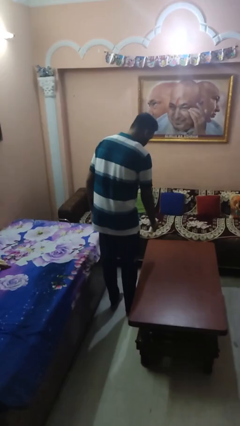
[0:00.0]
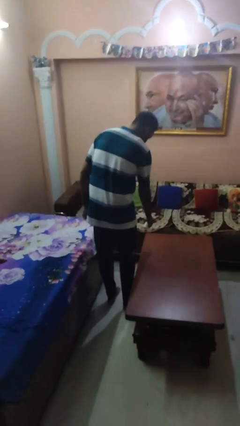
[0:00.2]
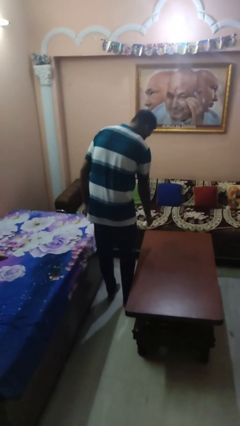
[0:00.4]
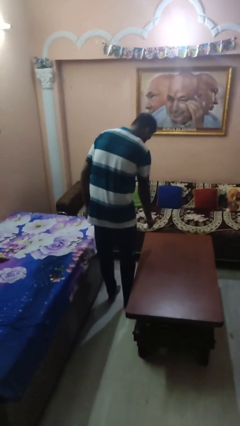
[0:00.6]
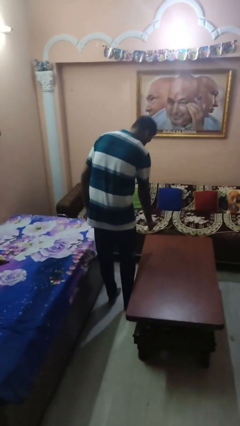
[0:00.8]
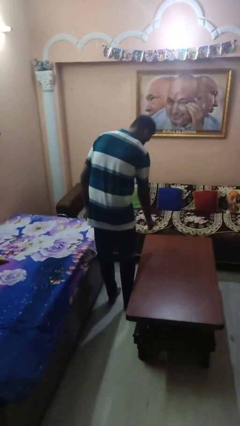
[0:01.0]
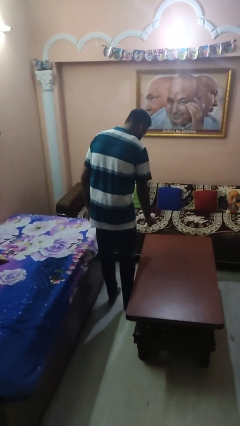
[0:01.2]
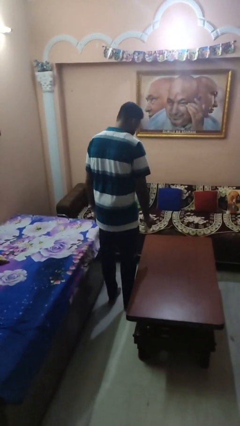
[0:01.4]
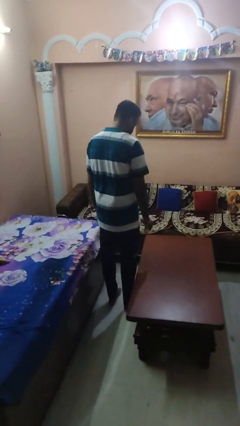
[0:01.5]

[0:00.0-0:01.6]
person sprays from bottle

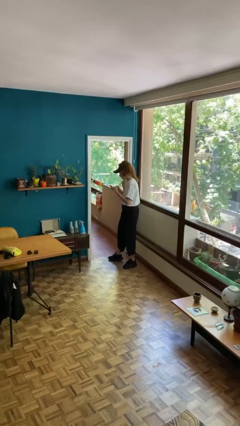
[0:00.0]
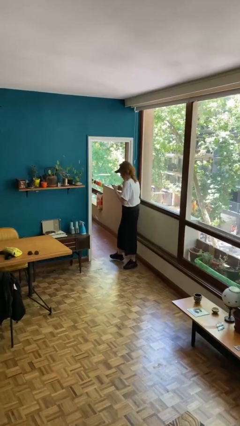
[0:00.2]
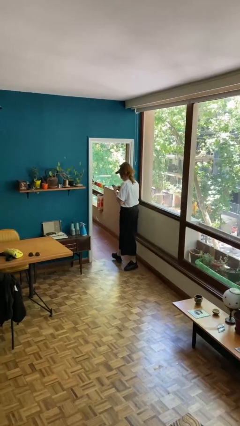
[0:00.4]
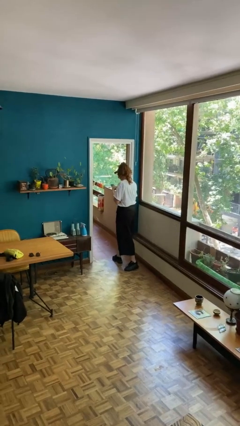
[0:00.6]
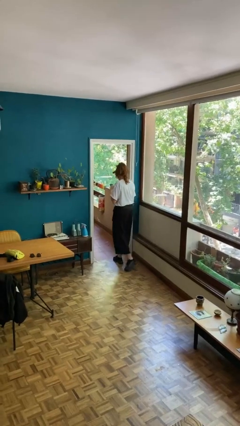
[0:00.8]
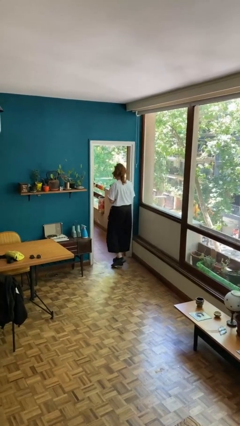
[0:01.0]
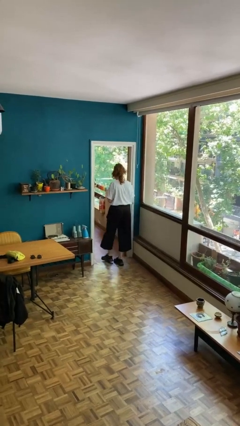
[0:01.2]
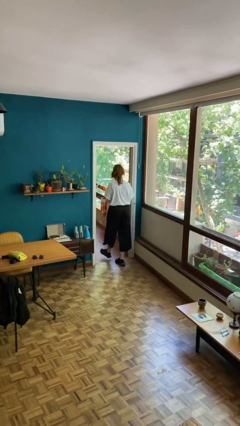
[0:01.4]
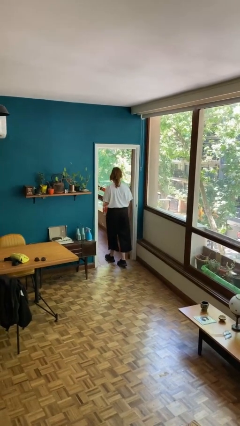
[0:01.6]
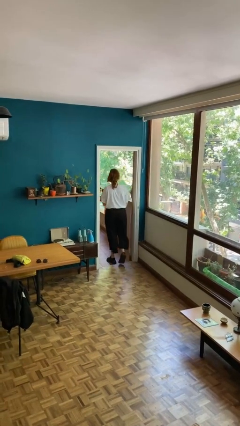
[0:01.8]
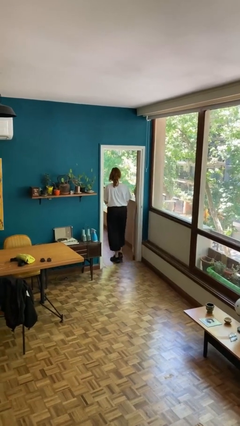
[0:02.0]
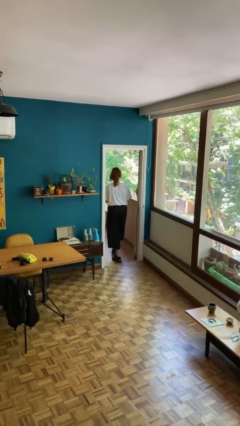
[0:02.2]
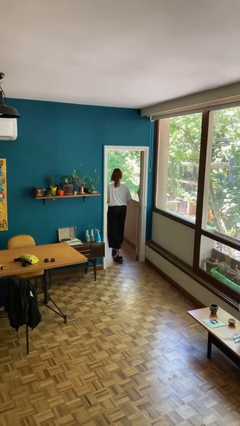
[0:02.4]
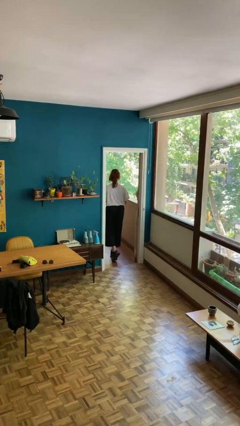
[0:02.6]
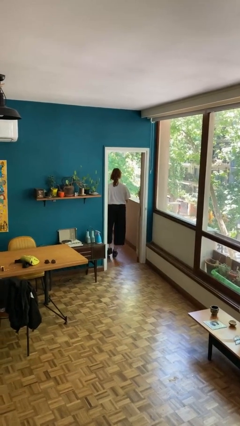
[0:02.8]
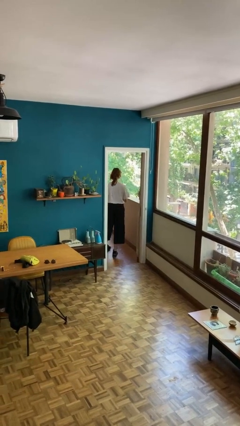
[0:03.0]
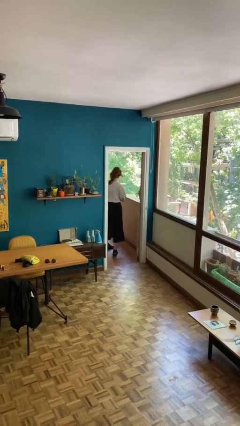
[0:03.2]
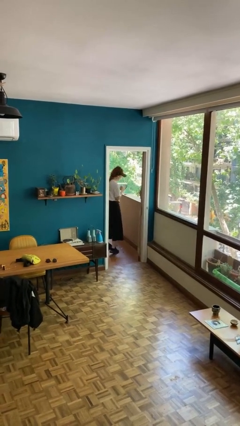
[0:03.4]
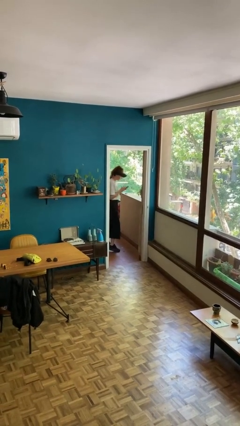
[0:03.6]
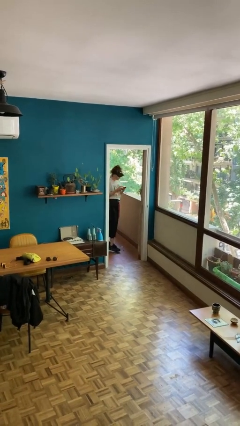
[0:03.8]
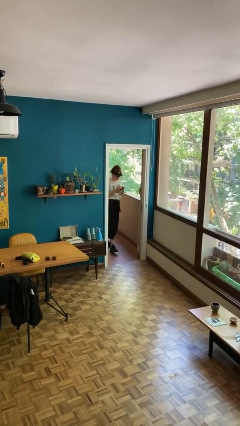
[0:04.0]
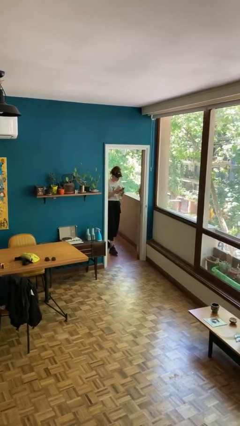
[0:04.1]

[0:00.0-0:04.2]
person exits scene through structure

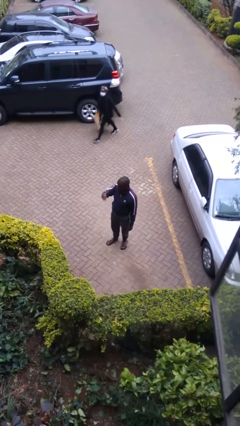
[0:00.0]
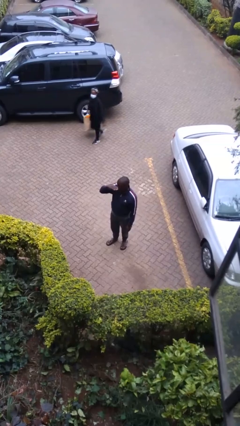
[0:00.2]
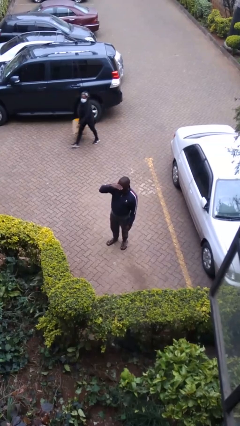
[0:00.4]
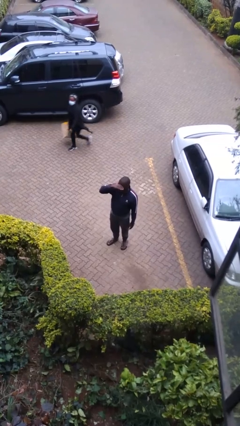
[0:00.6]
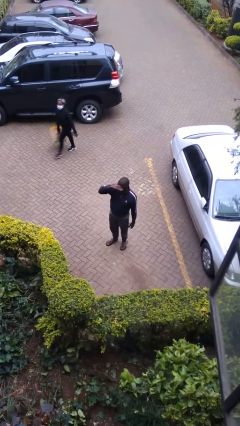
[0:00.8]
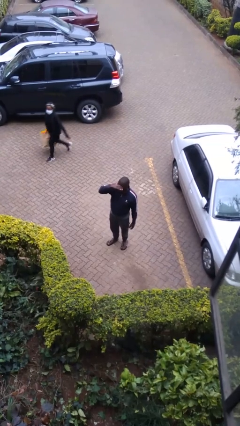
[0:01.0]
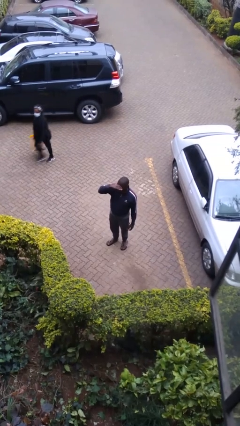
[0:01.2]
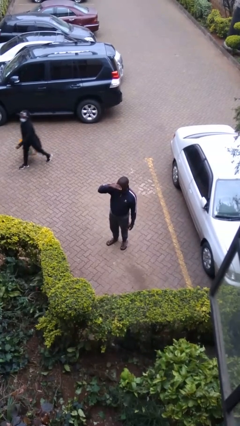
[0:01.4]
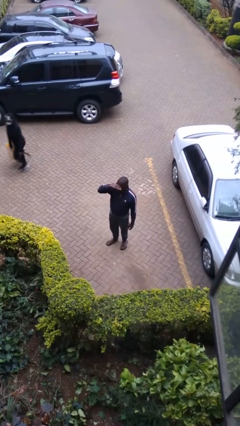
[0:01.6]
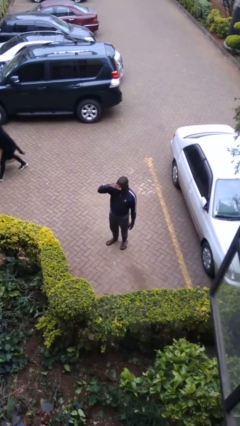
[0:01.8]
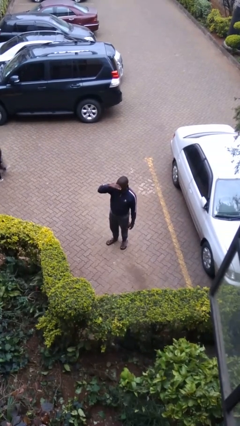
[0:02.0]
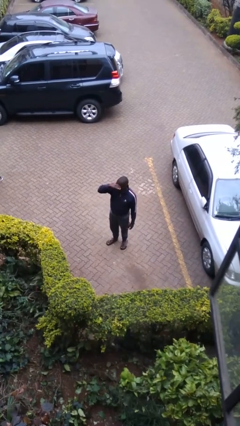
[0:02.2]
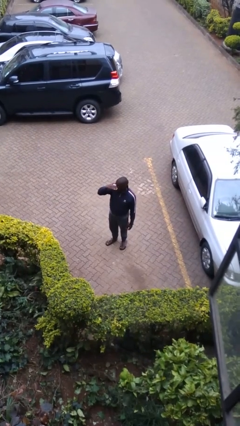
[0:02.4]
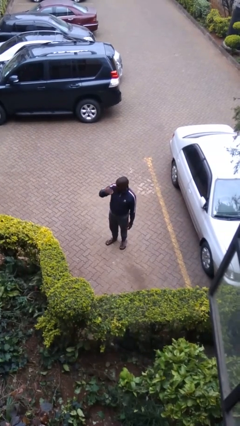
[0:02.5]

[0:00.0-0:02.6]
person shades eyes

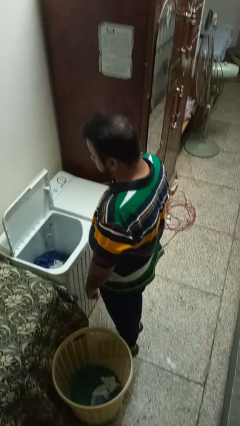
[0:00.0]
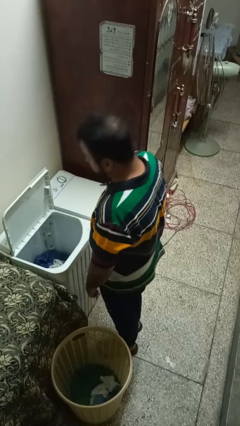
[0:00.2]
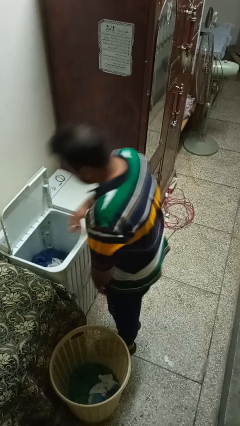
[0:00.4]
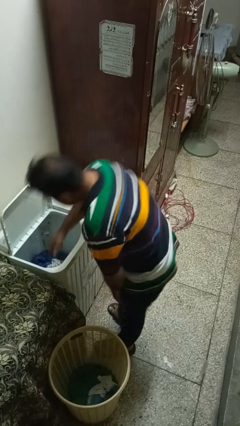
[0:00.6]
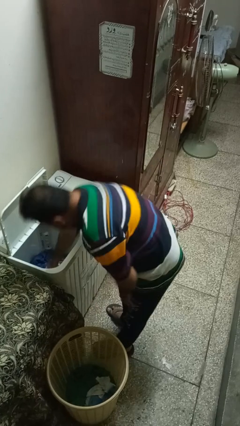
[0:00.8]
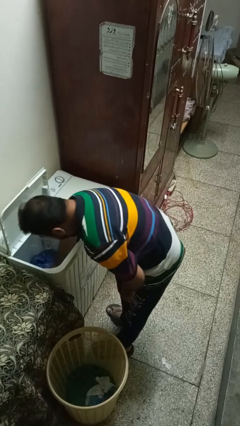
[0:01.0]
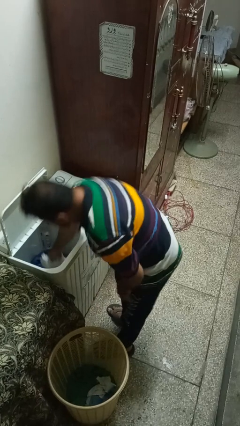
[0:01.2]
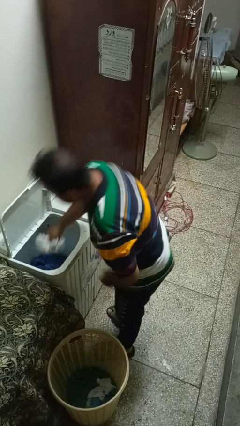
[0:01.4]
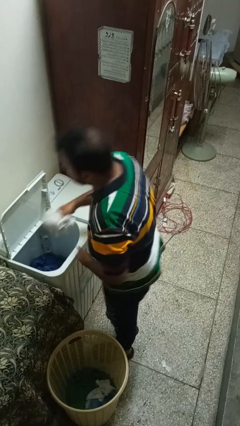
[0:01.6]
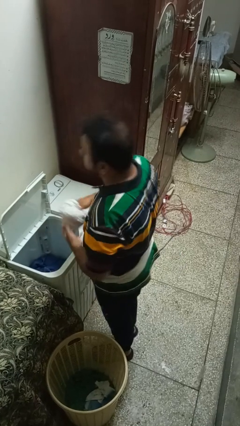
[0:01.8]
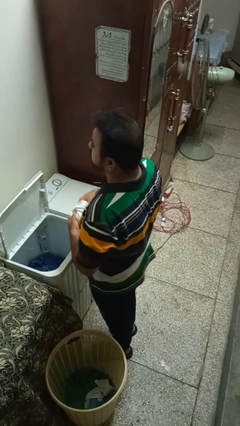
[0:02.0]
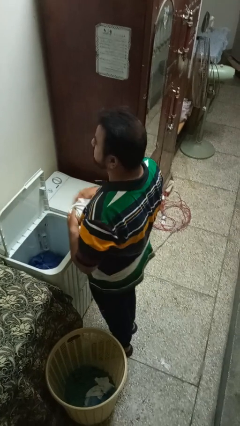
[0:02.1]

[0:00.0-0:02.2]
person unloads clotheswasher

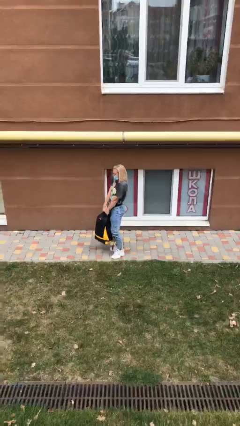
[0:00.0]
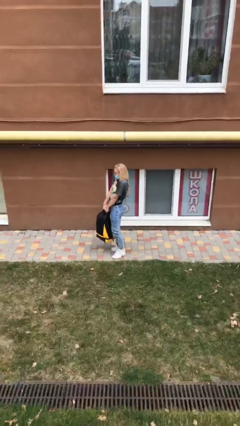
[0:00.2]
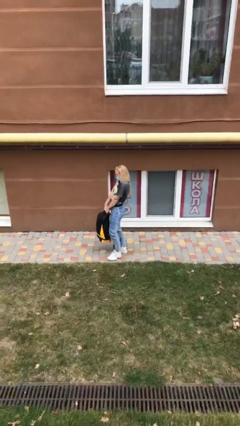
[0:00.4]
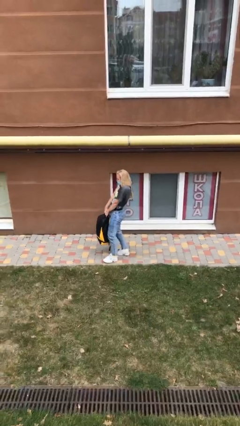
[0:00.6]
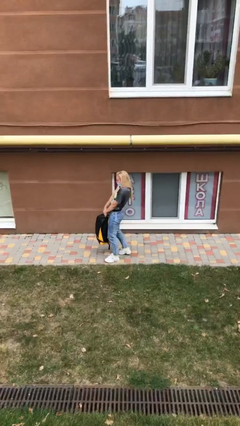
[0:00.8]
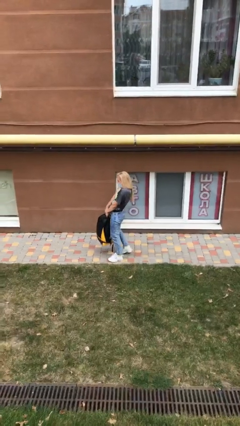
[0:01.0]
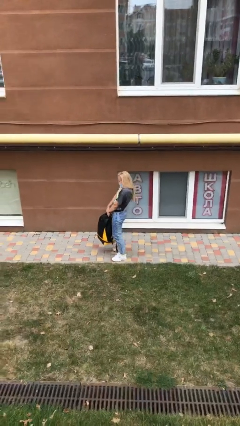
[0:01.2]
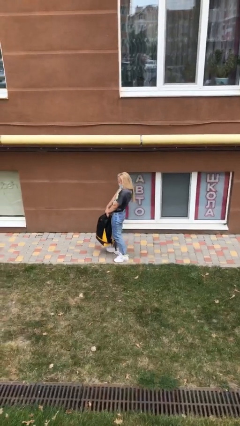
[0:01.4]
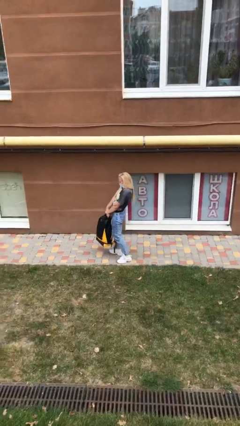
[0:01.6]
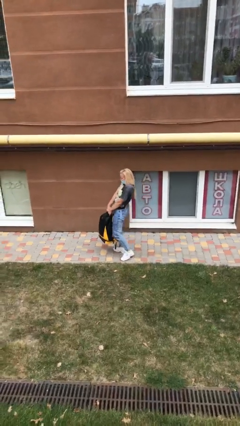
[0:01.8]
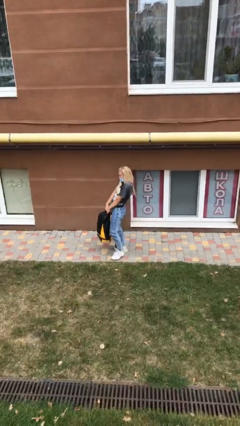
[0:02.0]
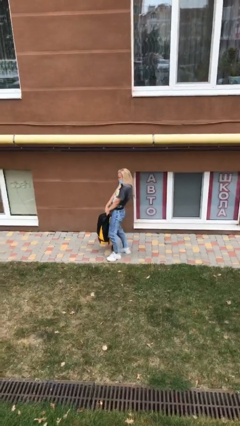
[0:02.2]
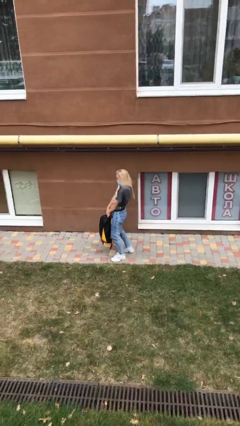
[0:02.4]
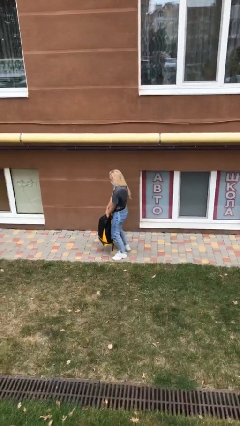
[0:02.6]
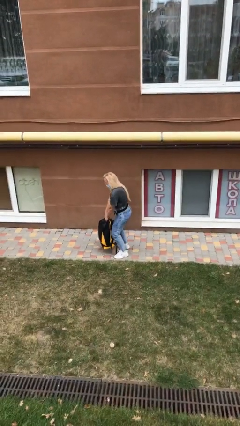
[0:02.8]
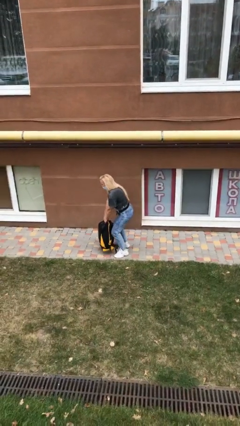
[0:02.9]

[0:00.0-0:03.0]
person carries heavy object

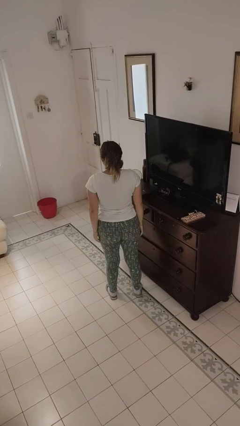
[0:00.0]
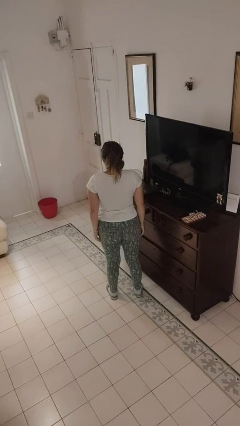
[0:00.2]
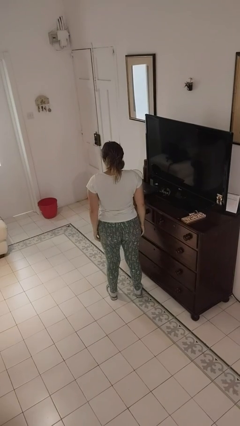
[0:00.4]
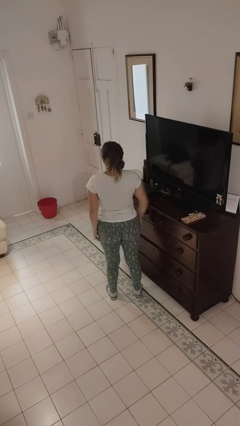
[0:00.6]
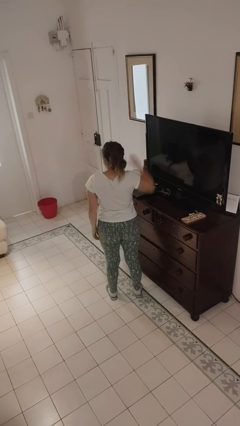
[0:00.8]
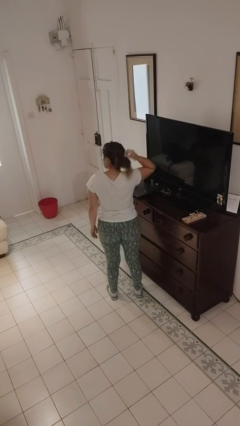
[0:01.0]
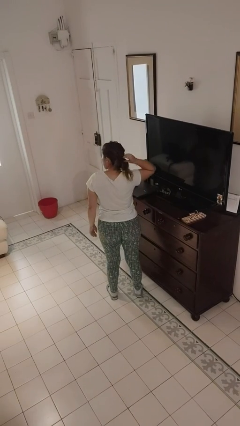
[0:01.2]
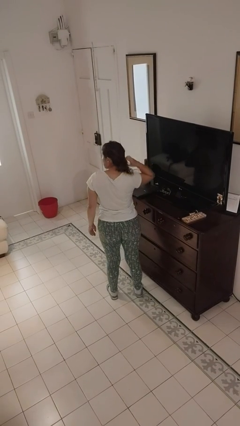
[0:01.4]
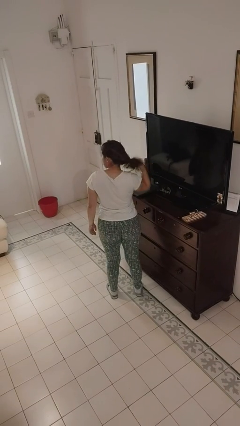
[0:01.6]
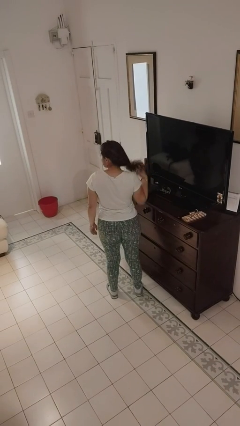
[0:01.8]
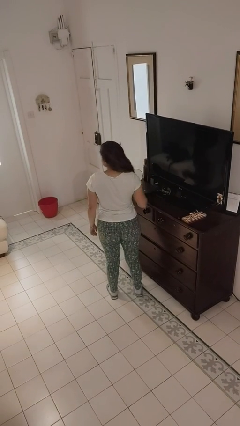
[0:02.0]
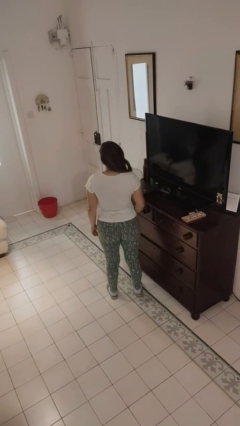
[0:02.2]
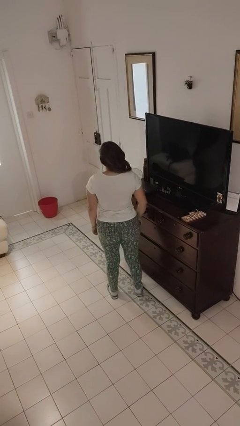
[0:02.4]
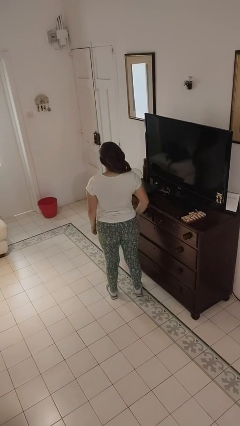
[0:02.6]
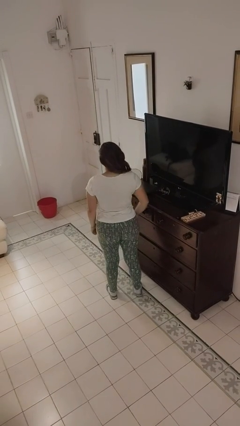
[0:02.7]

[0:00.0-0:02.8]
person takes off hairtie

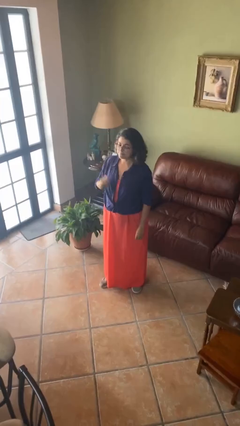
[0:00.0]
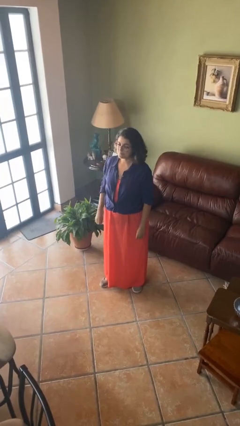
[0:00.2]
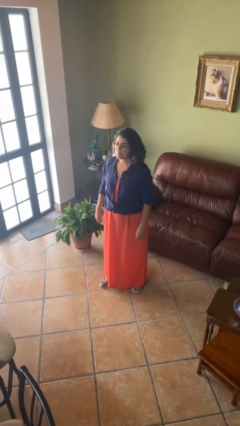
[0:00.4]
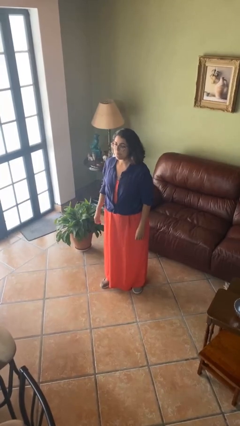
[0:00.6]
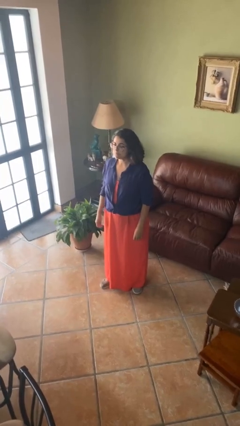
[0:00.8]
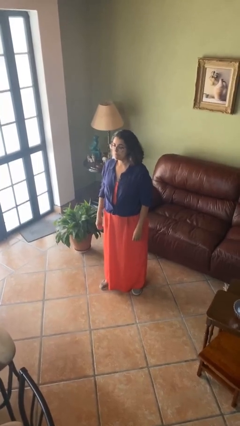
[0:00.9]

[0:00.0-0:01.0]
person gestures lower hand
